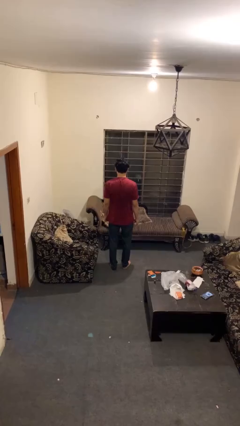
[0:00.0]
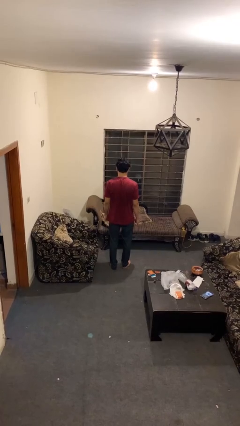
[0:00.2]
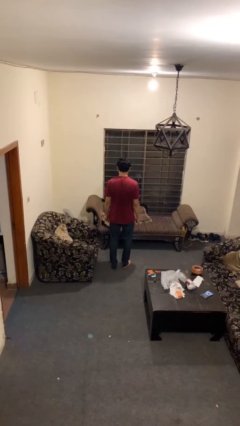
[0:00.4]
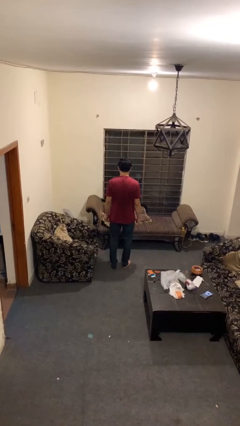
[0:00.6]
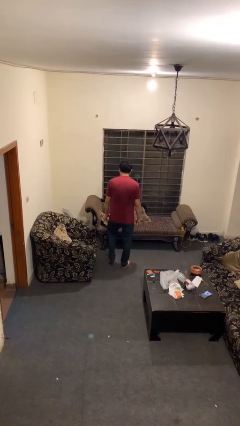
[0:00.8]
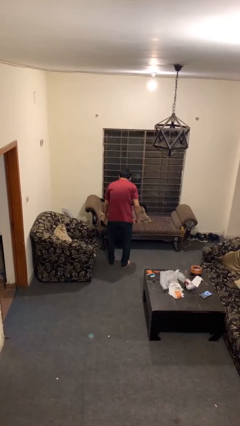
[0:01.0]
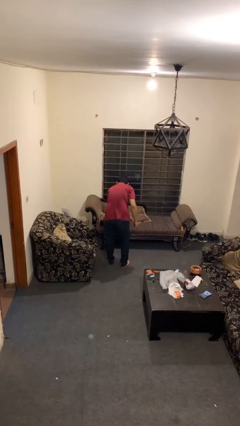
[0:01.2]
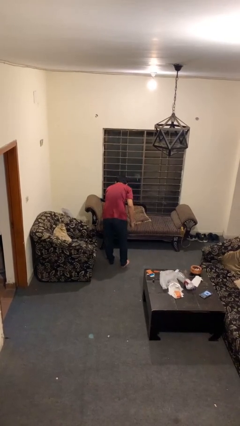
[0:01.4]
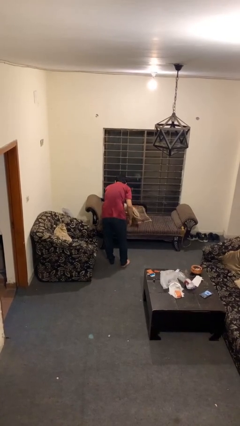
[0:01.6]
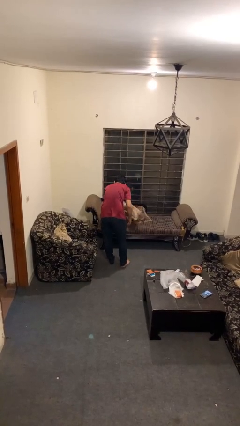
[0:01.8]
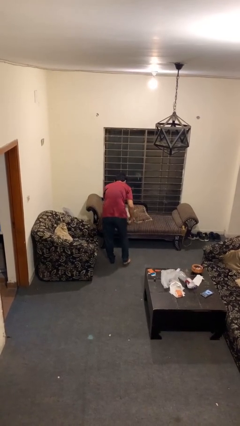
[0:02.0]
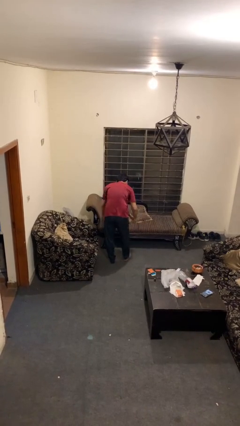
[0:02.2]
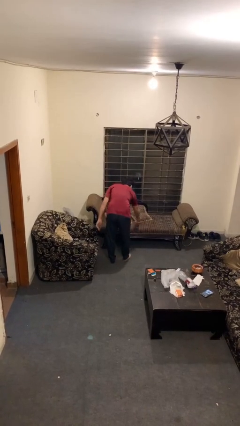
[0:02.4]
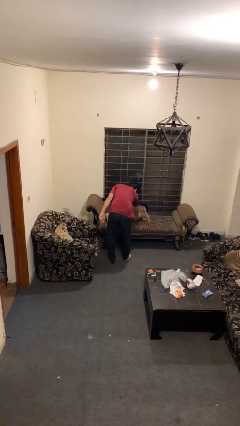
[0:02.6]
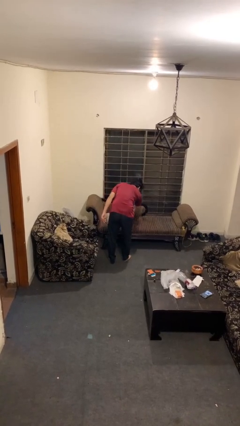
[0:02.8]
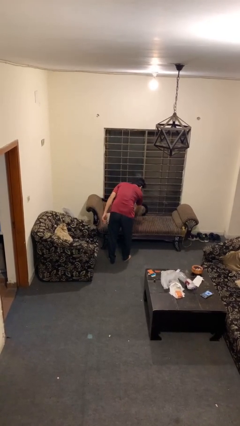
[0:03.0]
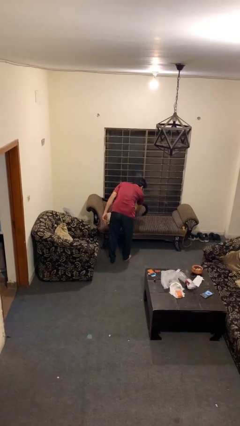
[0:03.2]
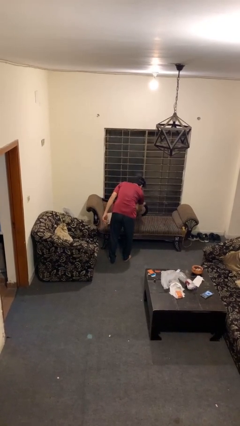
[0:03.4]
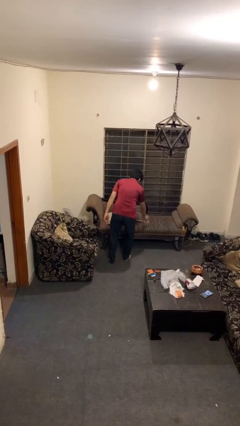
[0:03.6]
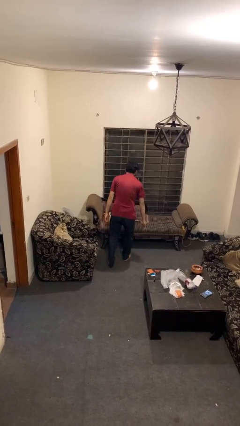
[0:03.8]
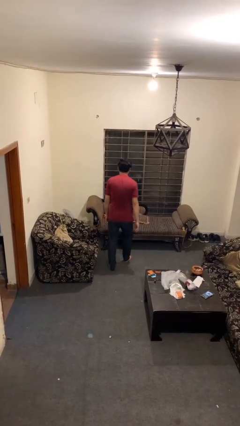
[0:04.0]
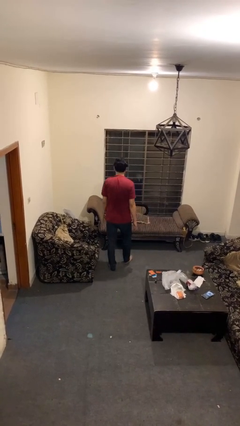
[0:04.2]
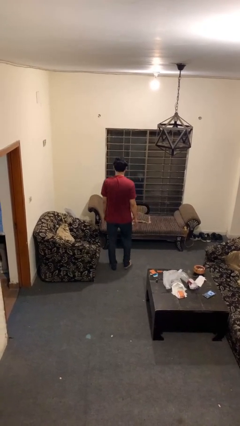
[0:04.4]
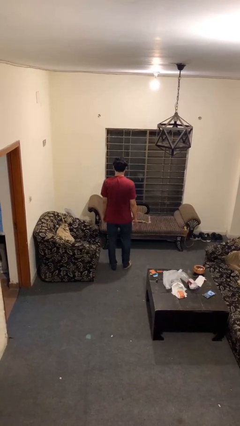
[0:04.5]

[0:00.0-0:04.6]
person searches in couch

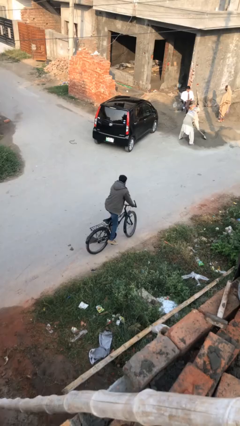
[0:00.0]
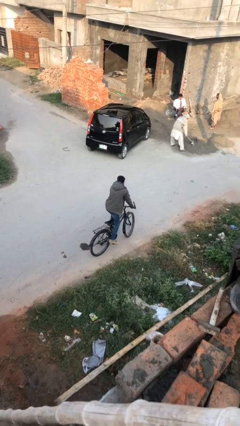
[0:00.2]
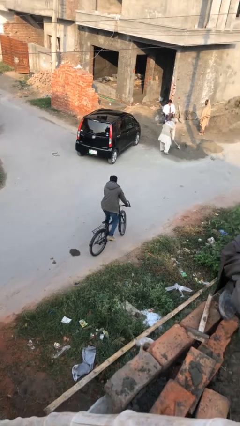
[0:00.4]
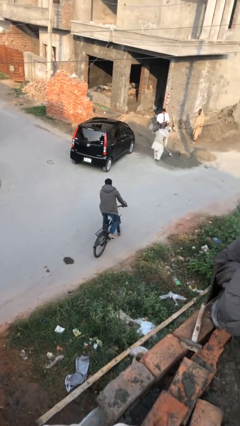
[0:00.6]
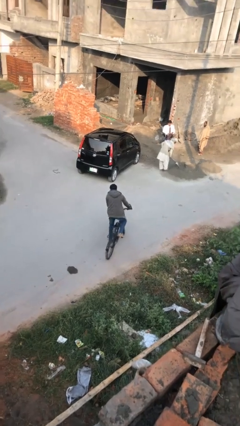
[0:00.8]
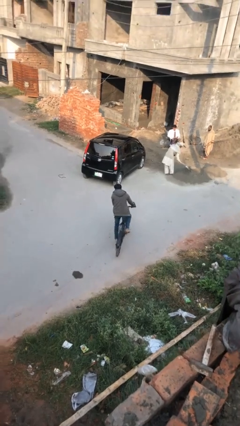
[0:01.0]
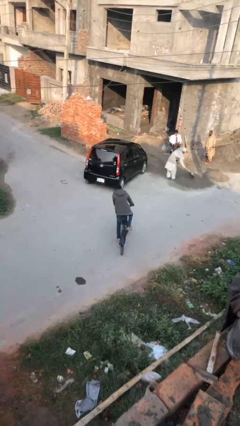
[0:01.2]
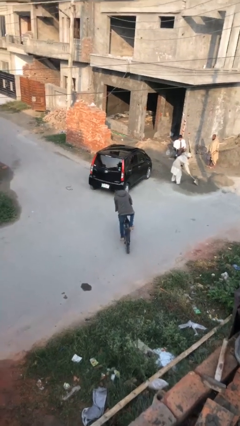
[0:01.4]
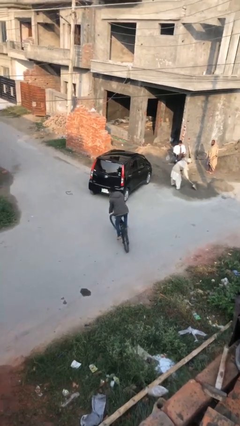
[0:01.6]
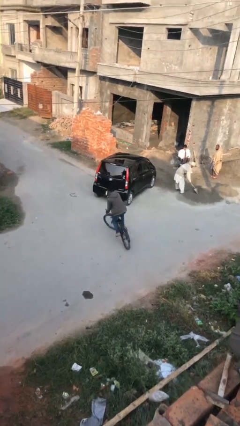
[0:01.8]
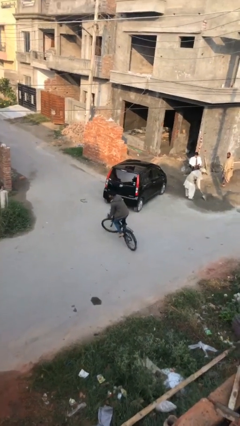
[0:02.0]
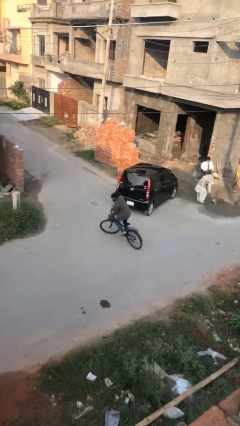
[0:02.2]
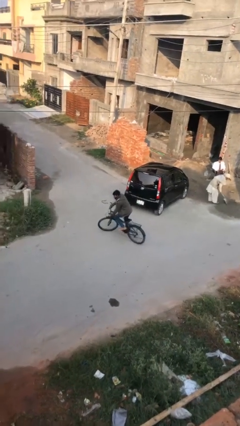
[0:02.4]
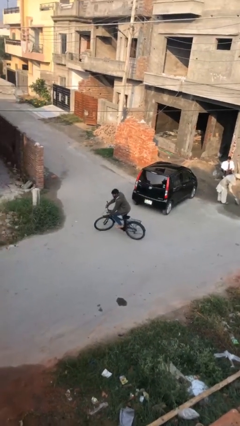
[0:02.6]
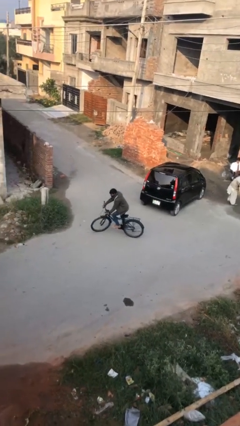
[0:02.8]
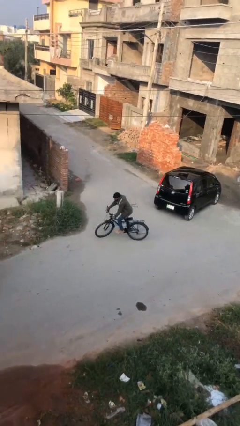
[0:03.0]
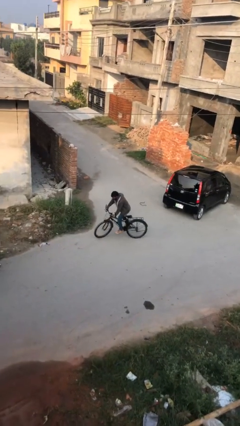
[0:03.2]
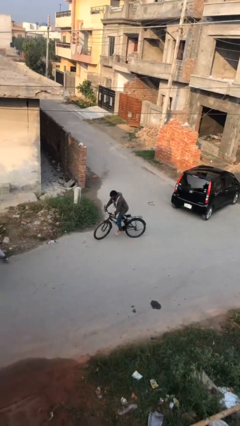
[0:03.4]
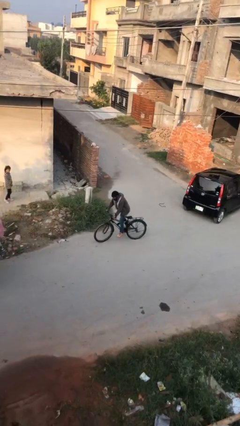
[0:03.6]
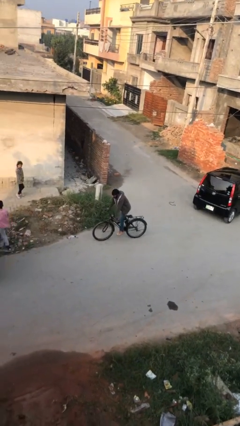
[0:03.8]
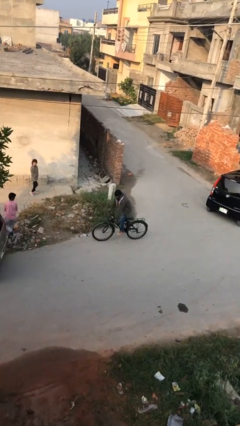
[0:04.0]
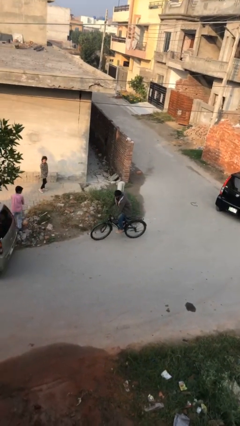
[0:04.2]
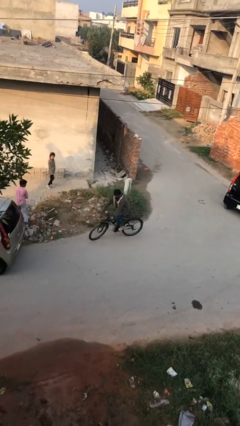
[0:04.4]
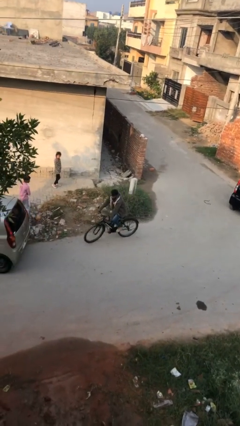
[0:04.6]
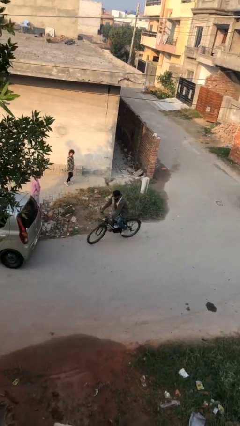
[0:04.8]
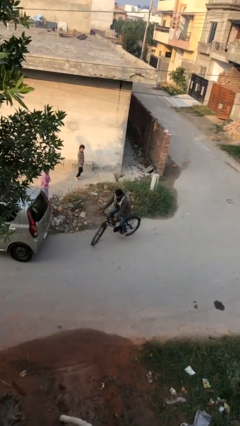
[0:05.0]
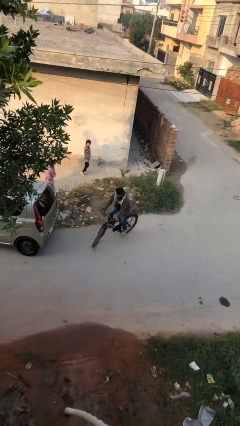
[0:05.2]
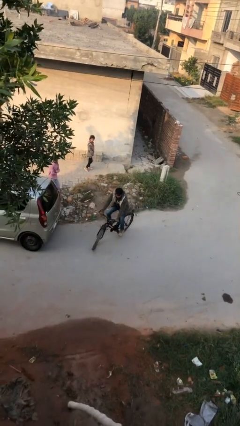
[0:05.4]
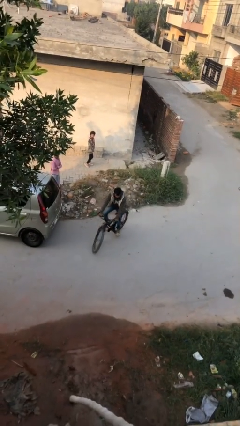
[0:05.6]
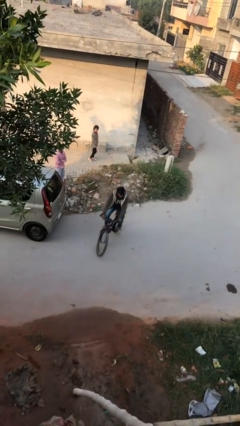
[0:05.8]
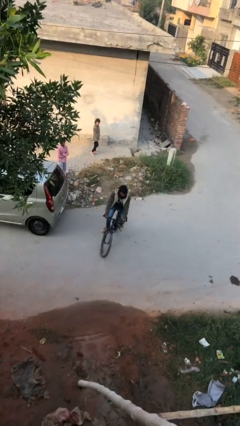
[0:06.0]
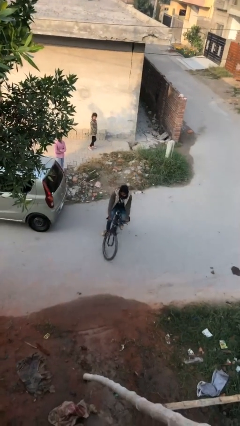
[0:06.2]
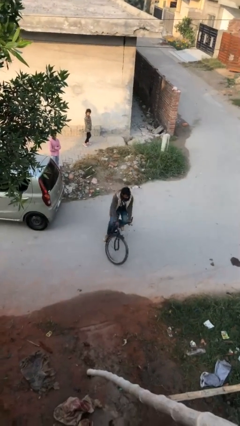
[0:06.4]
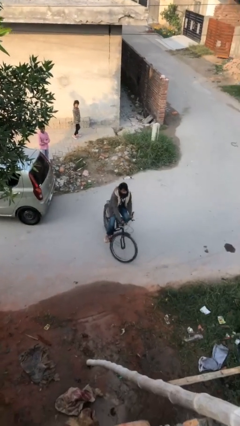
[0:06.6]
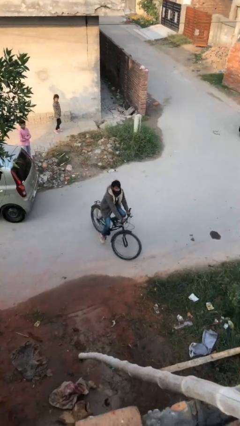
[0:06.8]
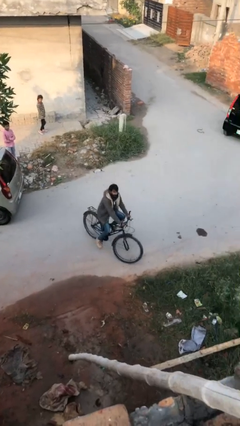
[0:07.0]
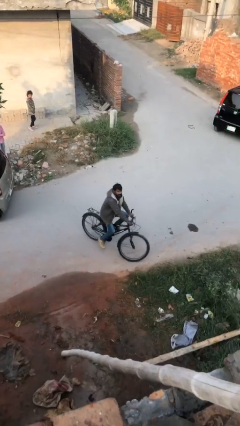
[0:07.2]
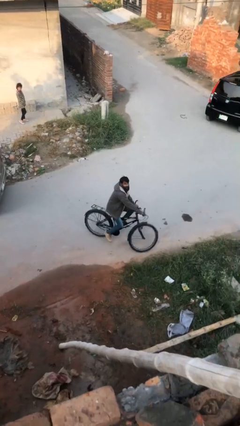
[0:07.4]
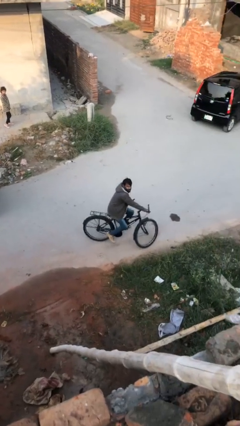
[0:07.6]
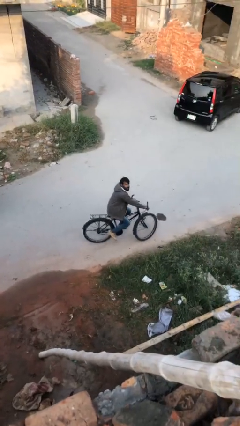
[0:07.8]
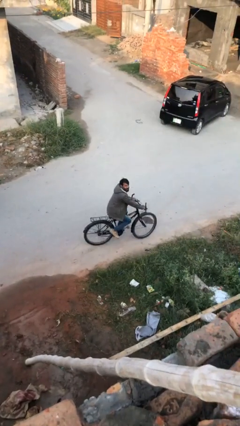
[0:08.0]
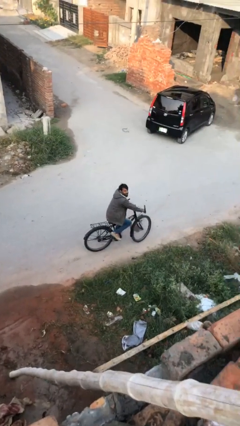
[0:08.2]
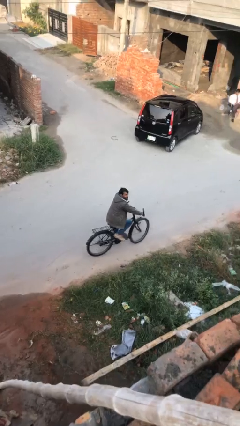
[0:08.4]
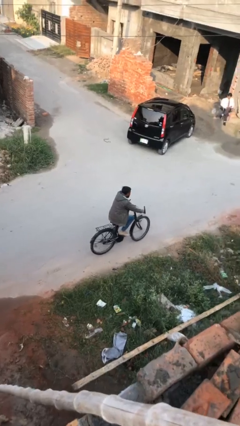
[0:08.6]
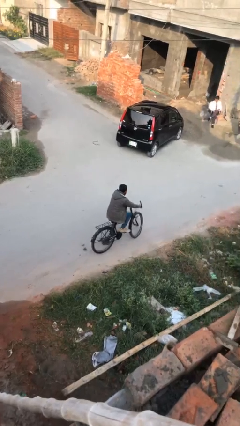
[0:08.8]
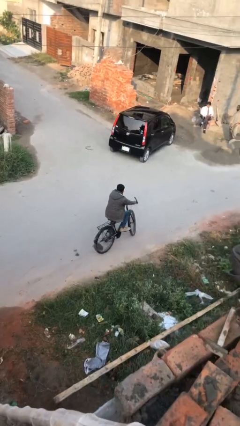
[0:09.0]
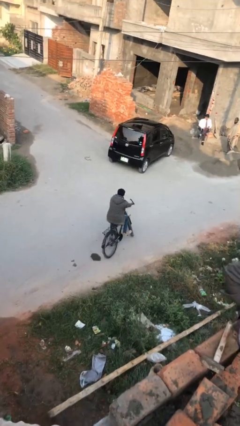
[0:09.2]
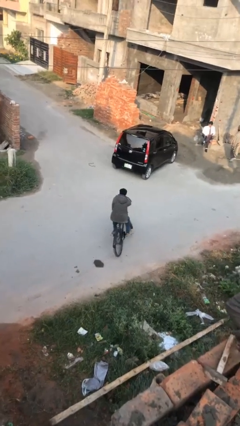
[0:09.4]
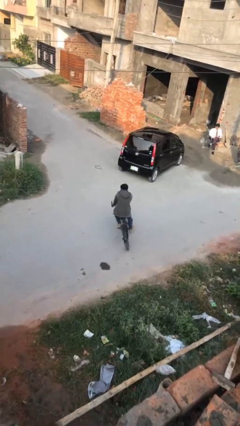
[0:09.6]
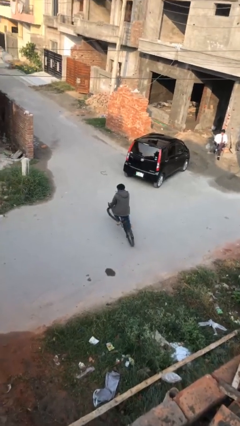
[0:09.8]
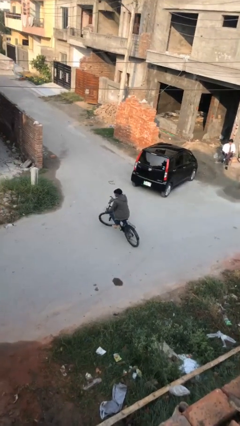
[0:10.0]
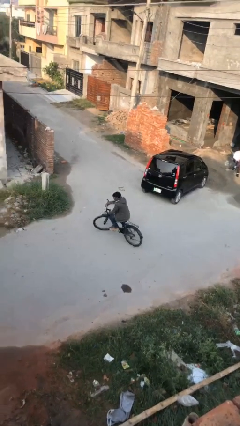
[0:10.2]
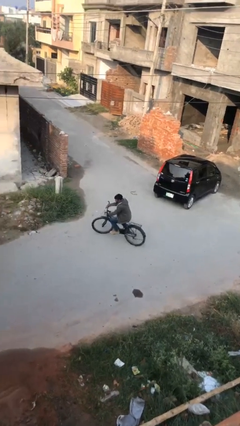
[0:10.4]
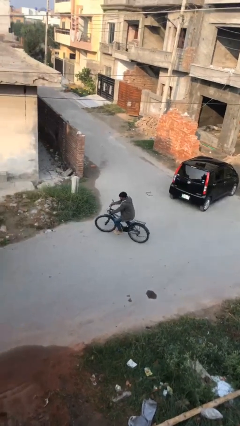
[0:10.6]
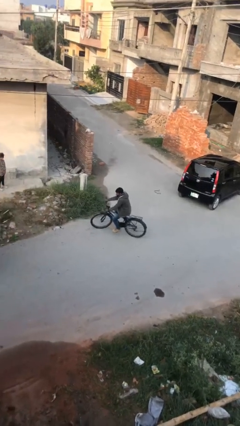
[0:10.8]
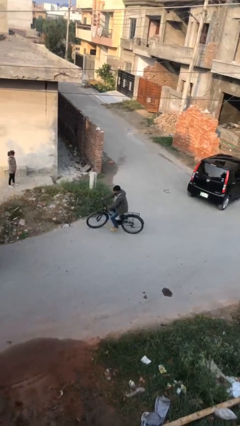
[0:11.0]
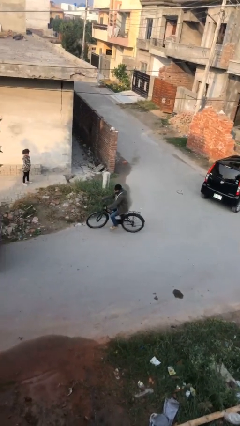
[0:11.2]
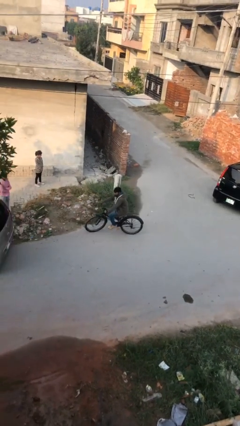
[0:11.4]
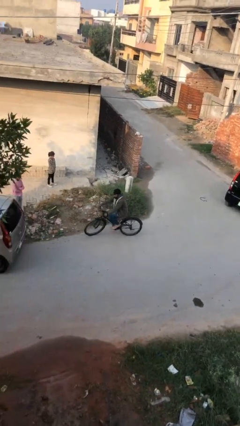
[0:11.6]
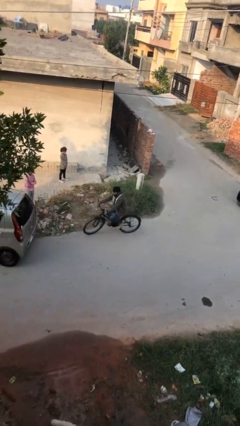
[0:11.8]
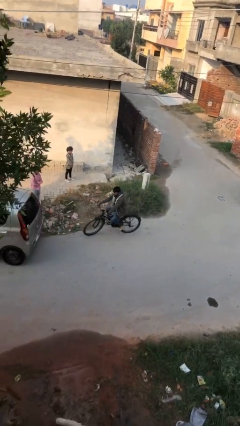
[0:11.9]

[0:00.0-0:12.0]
person rides bicycle

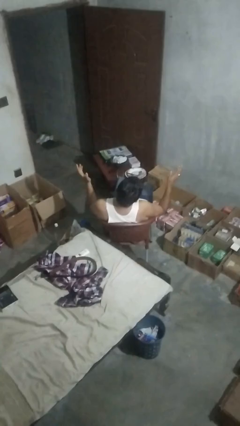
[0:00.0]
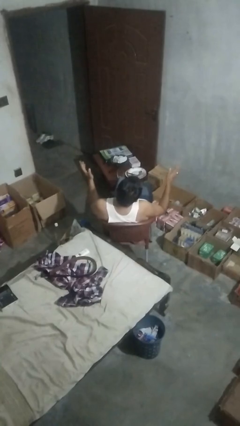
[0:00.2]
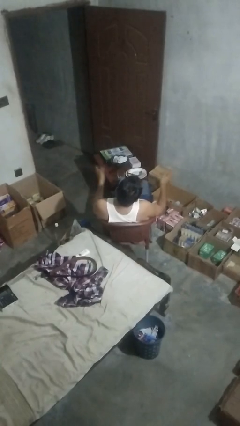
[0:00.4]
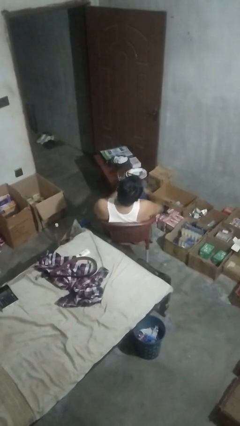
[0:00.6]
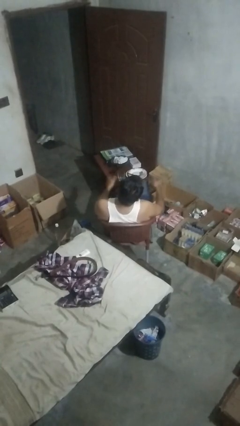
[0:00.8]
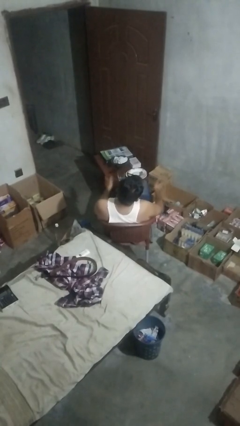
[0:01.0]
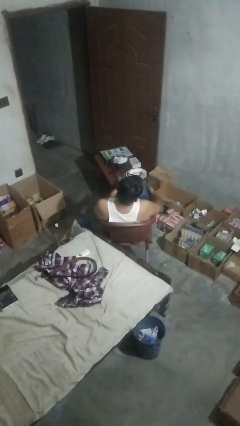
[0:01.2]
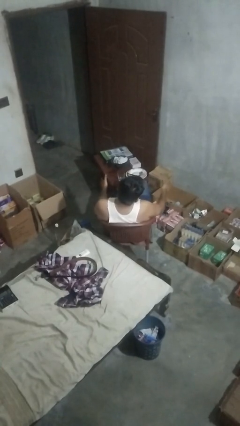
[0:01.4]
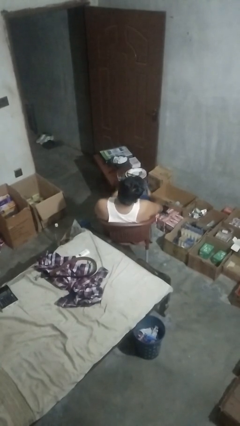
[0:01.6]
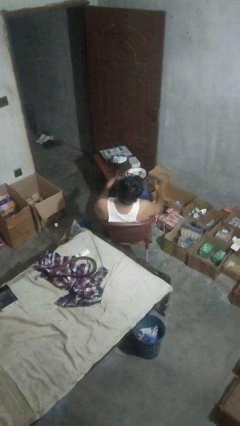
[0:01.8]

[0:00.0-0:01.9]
person slaps hands on thighs
